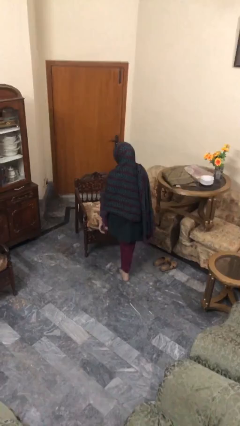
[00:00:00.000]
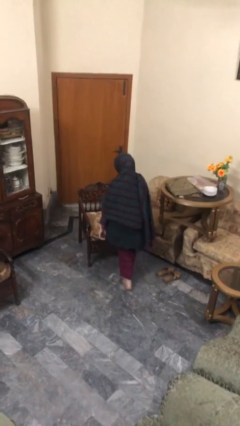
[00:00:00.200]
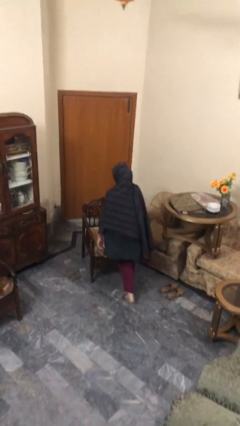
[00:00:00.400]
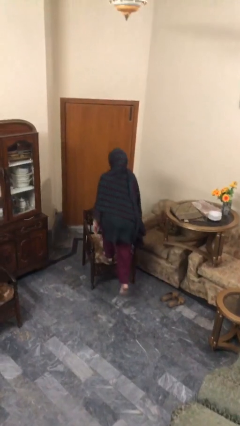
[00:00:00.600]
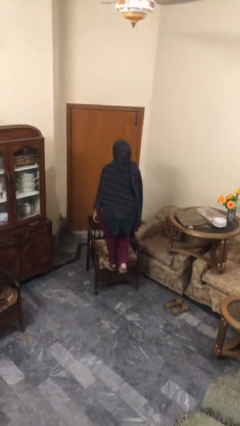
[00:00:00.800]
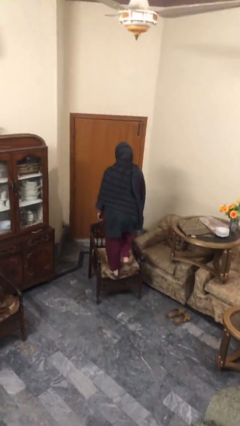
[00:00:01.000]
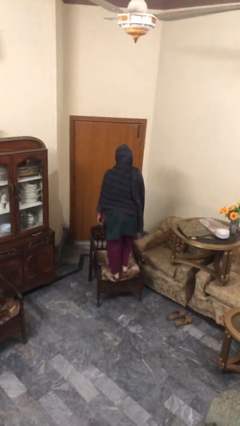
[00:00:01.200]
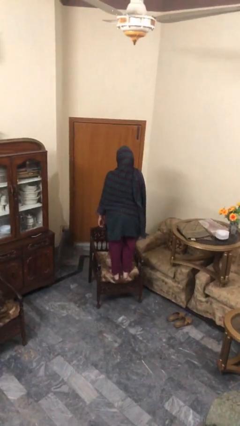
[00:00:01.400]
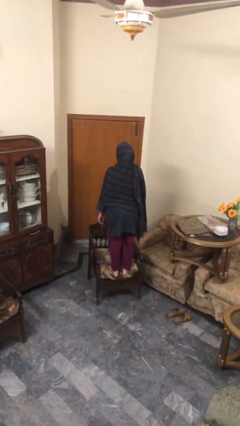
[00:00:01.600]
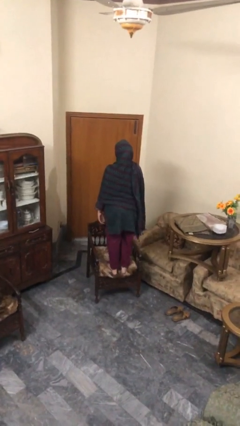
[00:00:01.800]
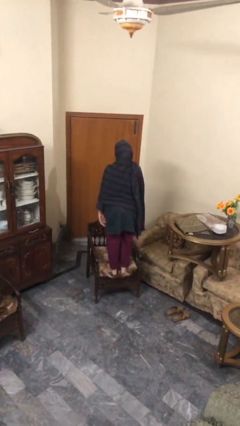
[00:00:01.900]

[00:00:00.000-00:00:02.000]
person climbs on chair

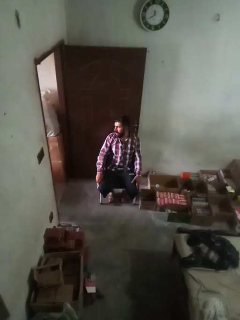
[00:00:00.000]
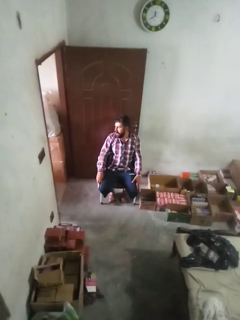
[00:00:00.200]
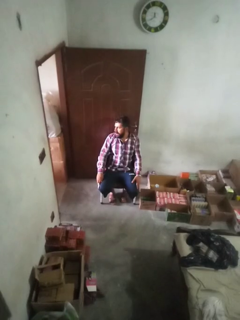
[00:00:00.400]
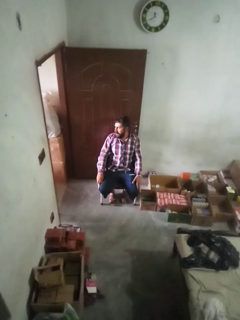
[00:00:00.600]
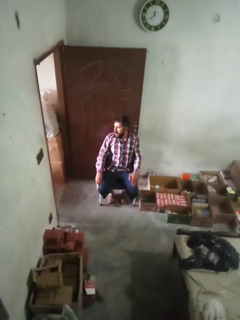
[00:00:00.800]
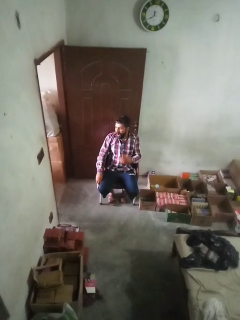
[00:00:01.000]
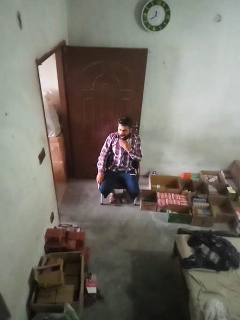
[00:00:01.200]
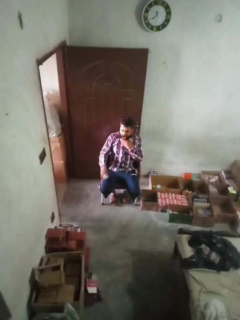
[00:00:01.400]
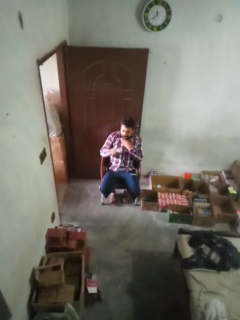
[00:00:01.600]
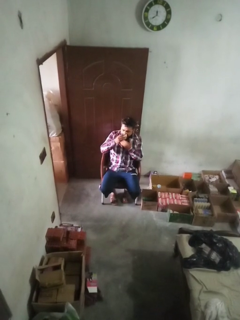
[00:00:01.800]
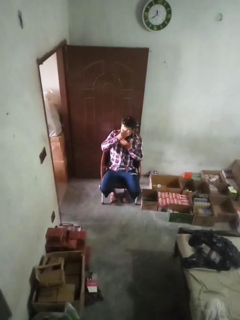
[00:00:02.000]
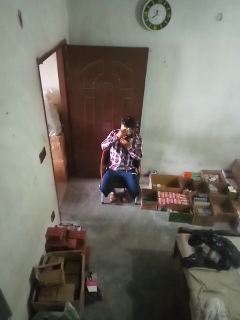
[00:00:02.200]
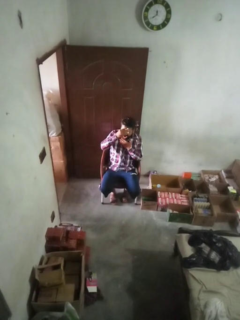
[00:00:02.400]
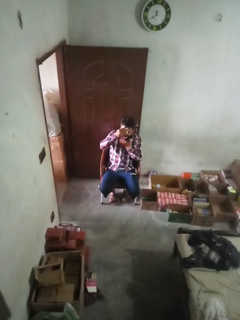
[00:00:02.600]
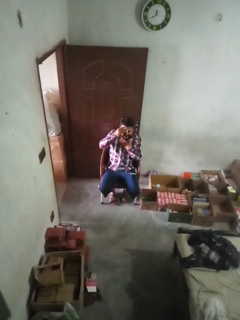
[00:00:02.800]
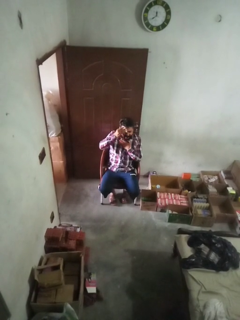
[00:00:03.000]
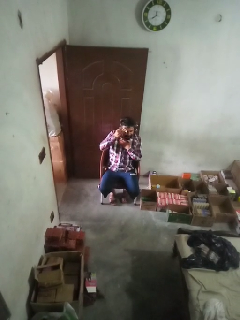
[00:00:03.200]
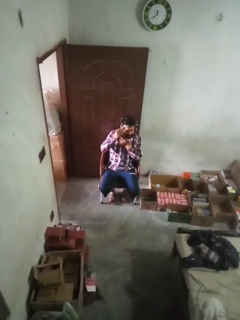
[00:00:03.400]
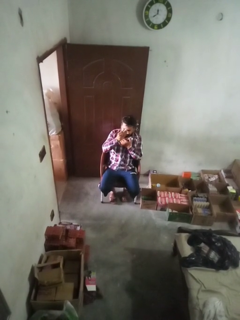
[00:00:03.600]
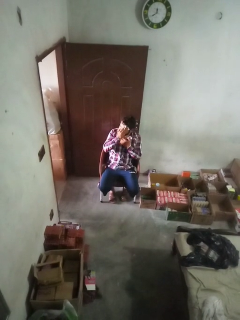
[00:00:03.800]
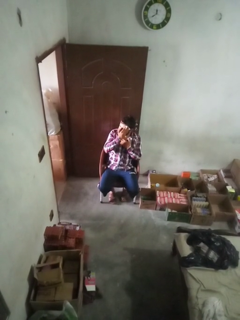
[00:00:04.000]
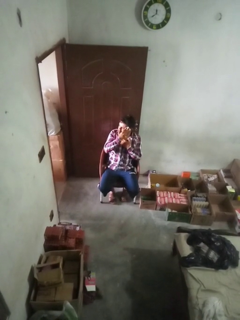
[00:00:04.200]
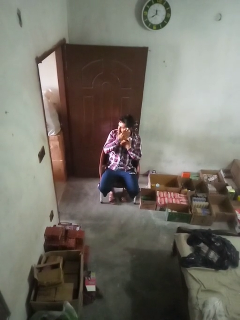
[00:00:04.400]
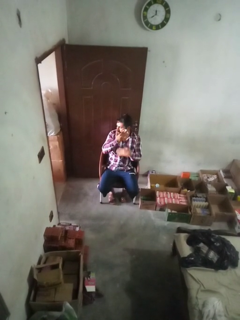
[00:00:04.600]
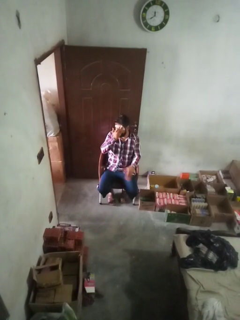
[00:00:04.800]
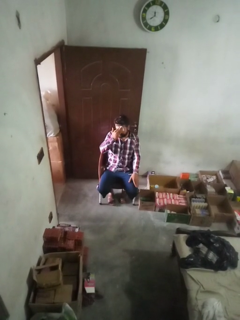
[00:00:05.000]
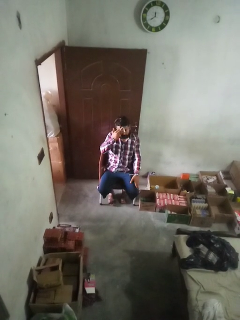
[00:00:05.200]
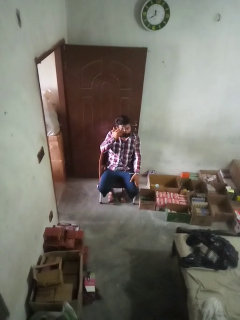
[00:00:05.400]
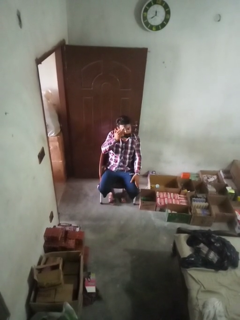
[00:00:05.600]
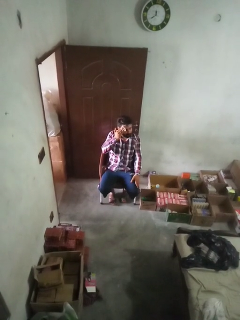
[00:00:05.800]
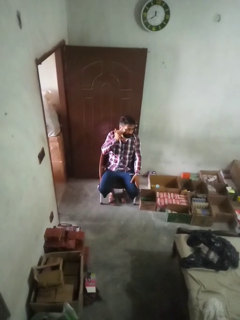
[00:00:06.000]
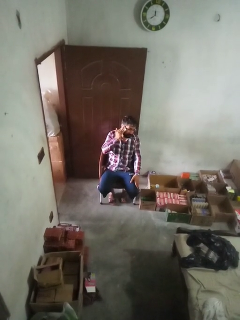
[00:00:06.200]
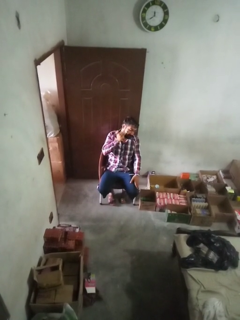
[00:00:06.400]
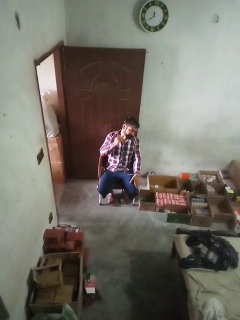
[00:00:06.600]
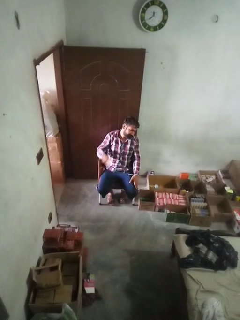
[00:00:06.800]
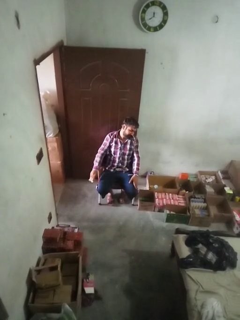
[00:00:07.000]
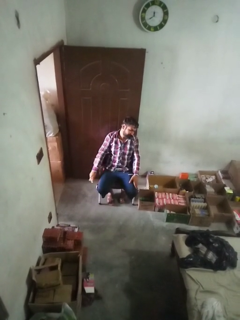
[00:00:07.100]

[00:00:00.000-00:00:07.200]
person wipes mouth with napkin

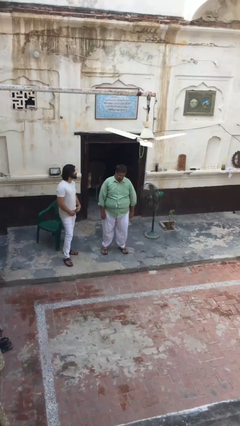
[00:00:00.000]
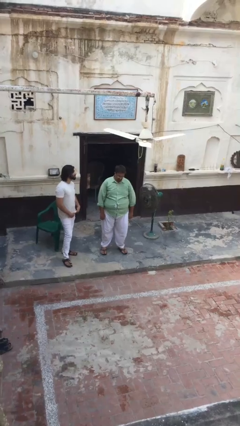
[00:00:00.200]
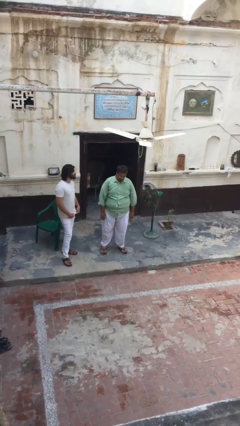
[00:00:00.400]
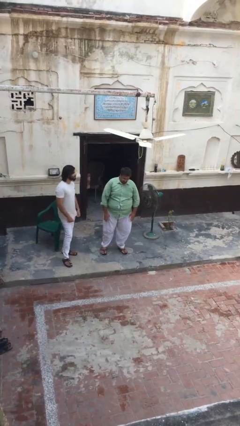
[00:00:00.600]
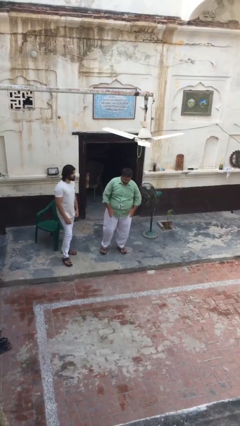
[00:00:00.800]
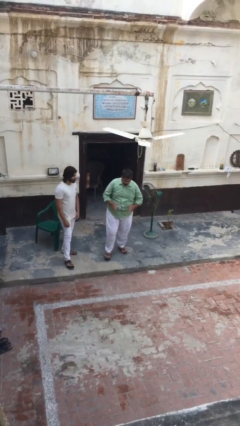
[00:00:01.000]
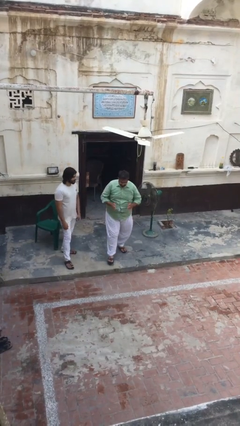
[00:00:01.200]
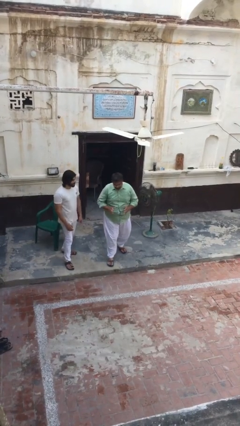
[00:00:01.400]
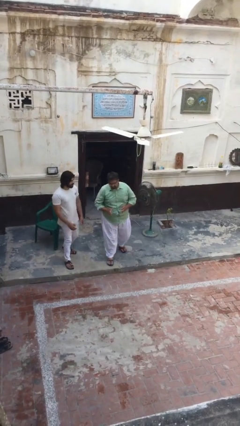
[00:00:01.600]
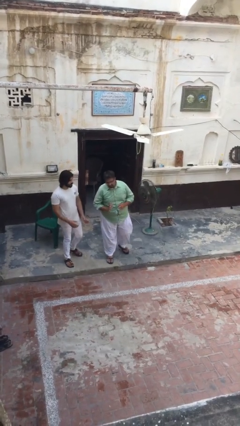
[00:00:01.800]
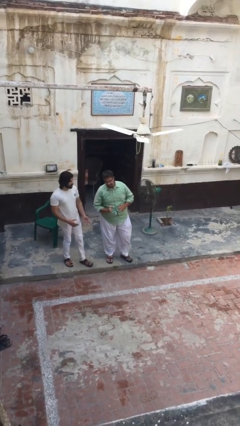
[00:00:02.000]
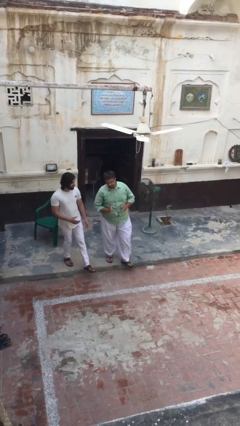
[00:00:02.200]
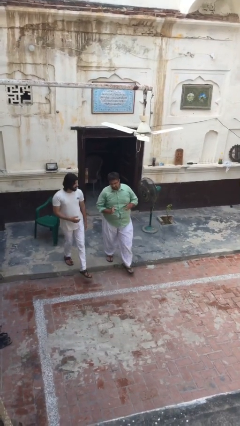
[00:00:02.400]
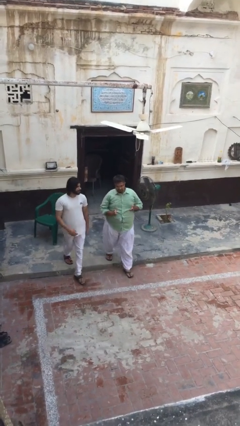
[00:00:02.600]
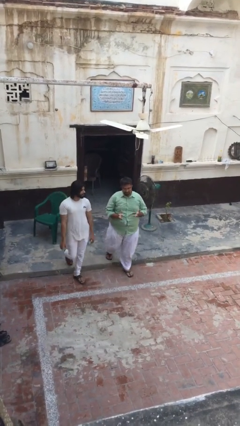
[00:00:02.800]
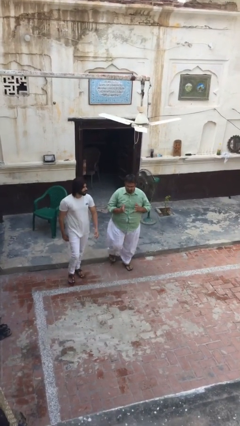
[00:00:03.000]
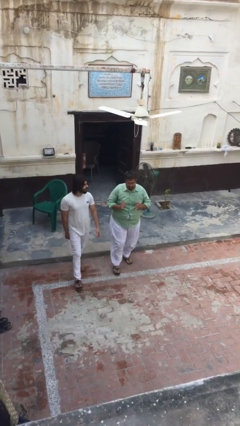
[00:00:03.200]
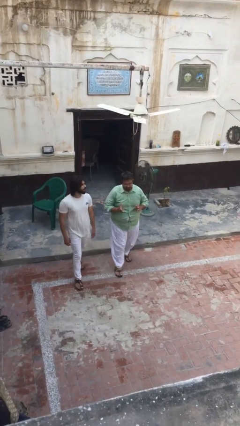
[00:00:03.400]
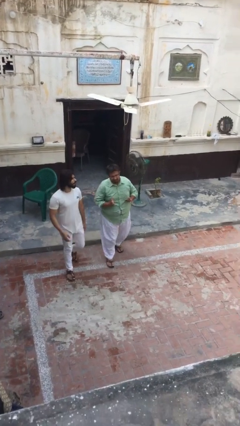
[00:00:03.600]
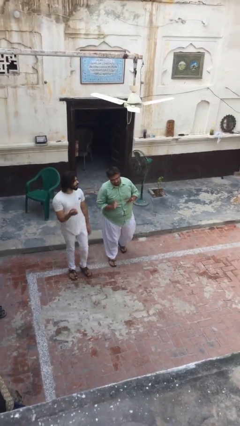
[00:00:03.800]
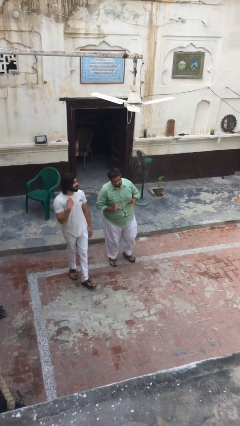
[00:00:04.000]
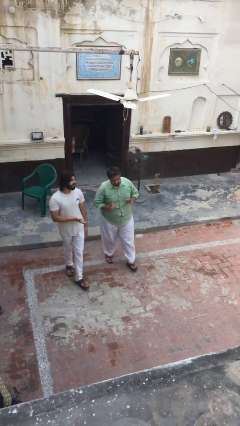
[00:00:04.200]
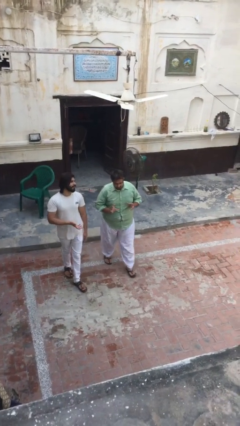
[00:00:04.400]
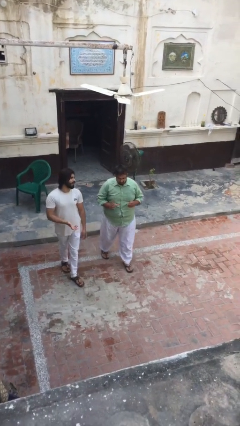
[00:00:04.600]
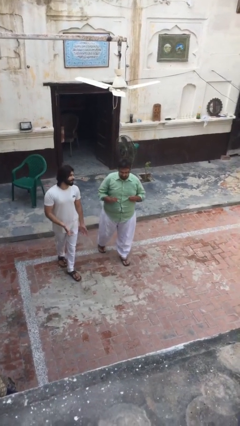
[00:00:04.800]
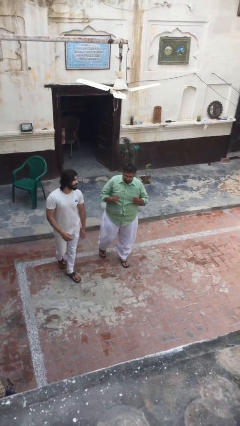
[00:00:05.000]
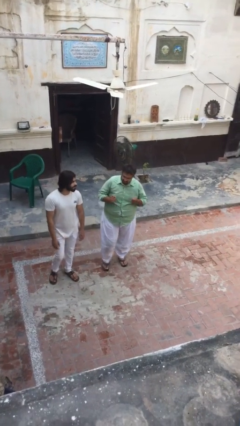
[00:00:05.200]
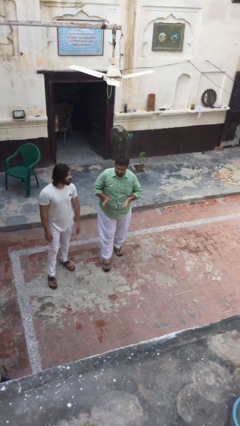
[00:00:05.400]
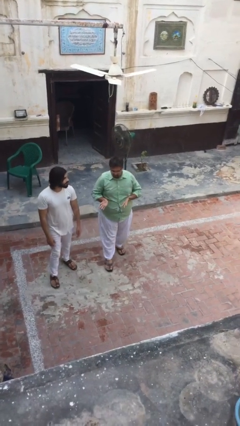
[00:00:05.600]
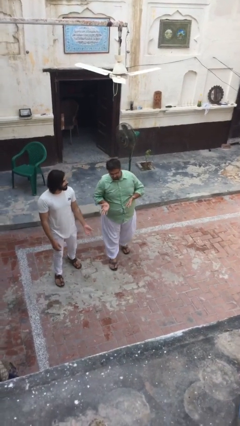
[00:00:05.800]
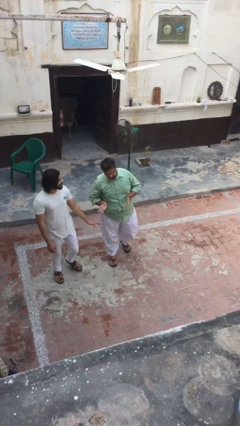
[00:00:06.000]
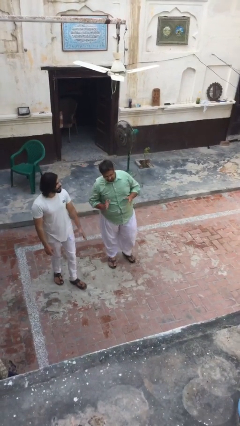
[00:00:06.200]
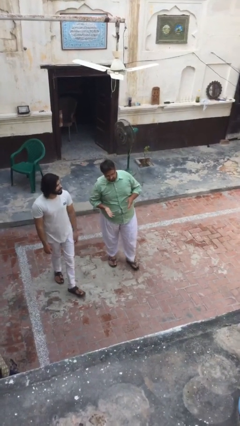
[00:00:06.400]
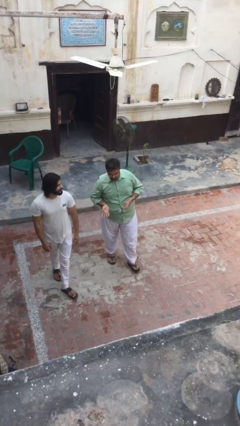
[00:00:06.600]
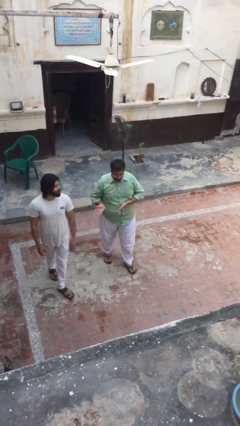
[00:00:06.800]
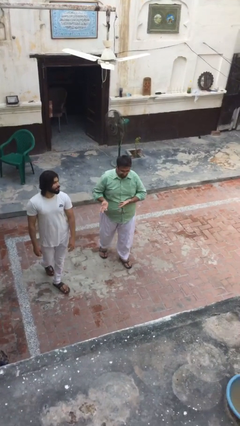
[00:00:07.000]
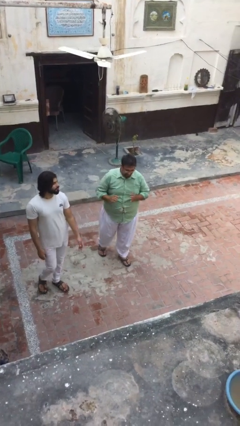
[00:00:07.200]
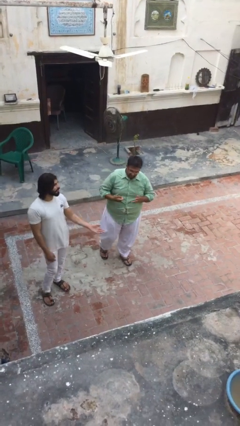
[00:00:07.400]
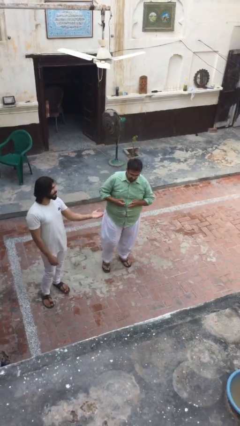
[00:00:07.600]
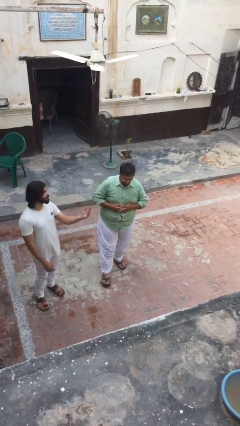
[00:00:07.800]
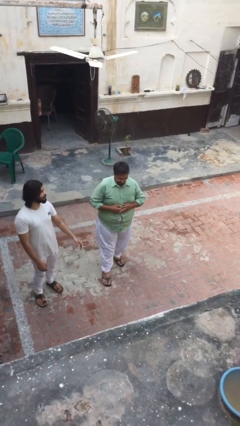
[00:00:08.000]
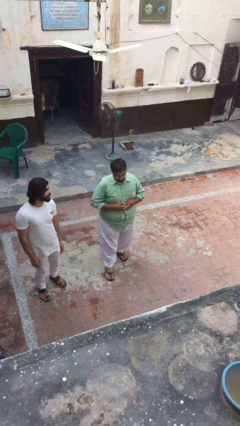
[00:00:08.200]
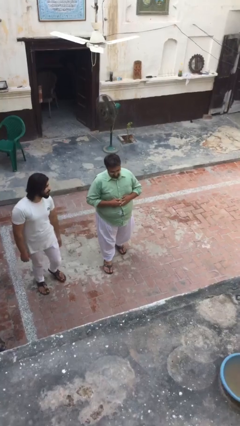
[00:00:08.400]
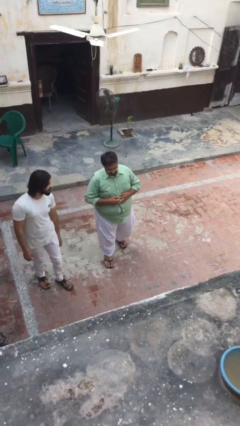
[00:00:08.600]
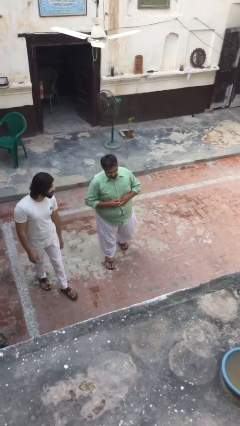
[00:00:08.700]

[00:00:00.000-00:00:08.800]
person talks to person

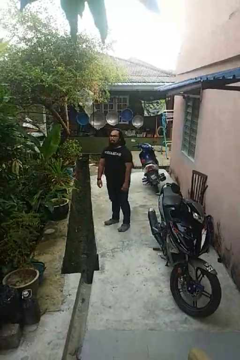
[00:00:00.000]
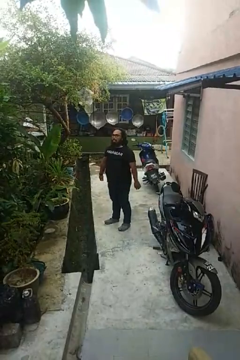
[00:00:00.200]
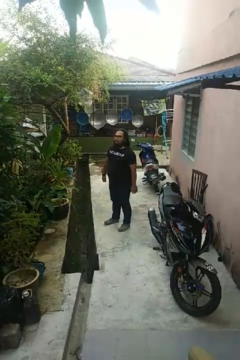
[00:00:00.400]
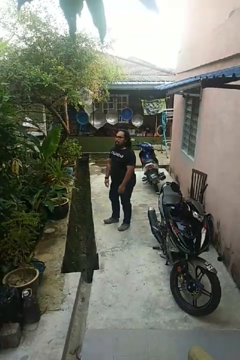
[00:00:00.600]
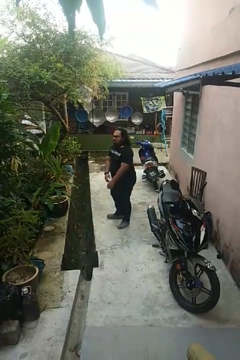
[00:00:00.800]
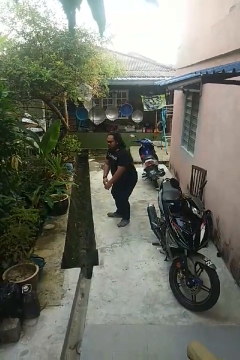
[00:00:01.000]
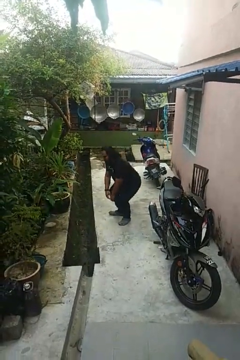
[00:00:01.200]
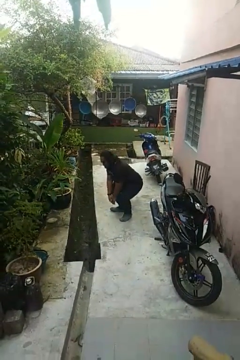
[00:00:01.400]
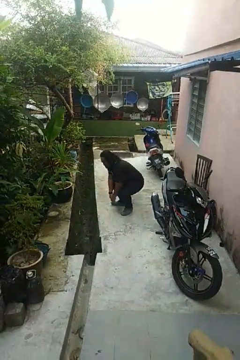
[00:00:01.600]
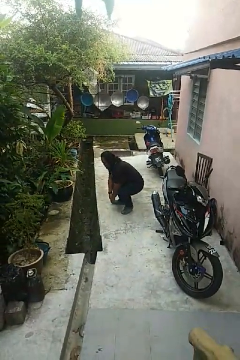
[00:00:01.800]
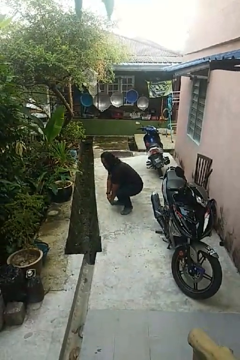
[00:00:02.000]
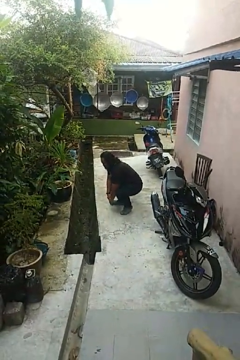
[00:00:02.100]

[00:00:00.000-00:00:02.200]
person squats
